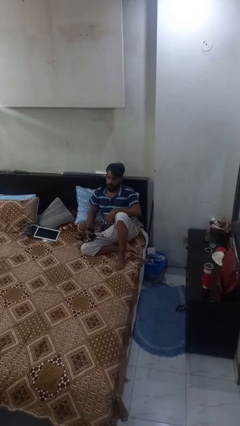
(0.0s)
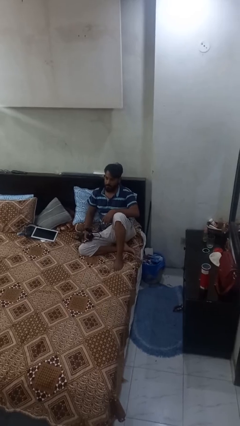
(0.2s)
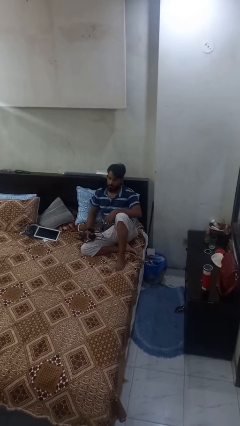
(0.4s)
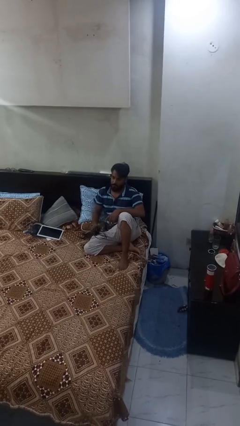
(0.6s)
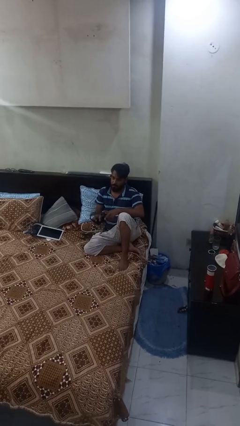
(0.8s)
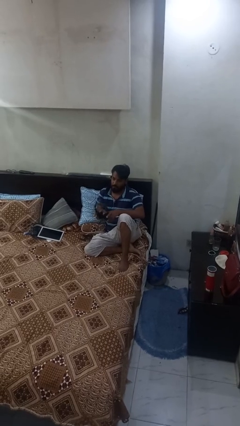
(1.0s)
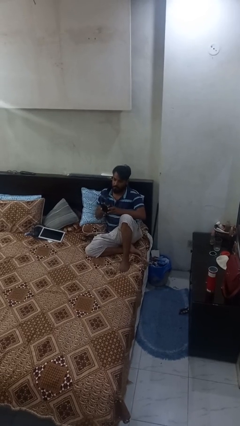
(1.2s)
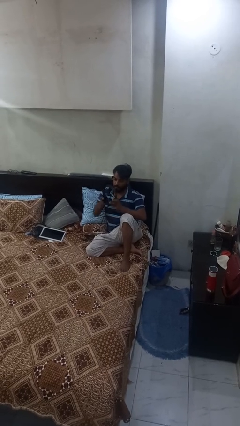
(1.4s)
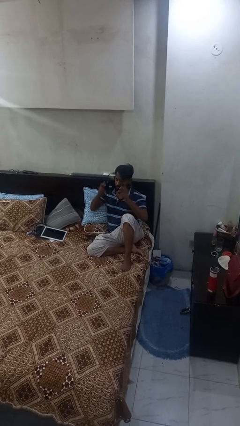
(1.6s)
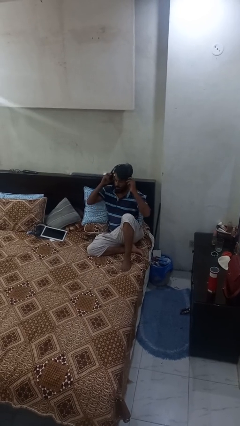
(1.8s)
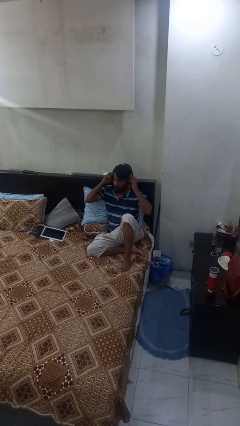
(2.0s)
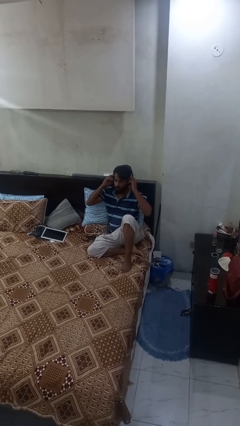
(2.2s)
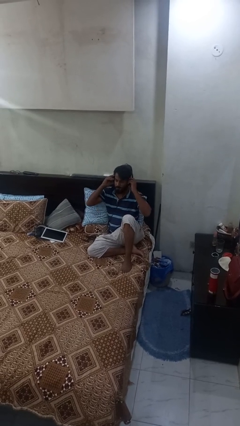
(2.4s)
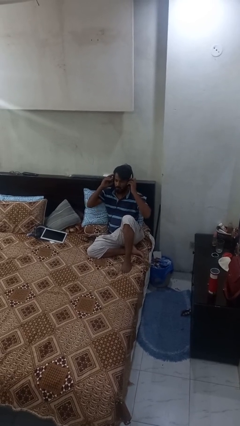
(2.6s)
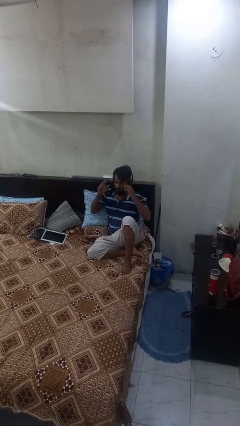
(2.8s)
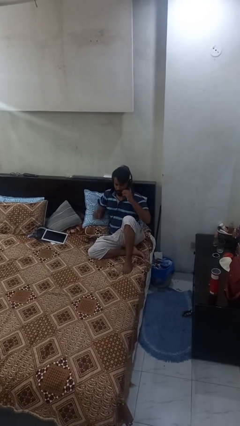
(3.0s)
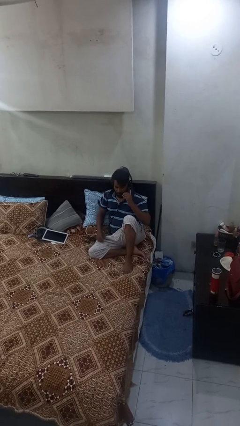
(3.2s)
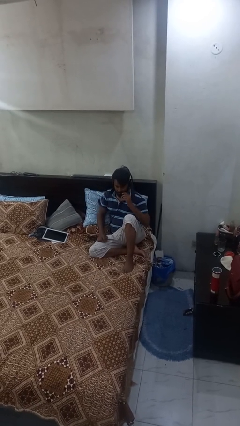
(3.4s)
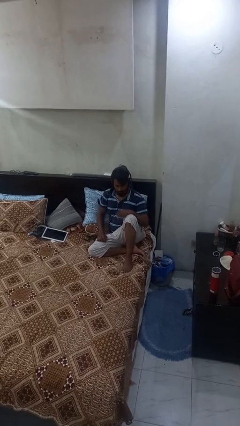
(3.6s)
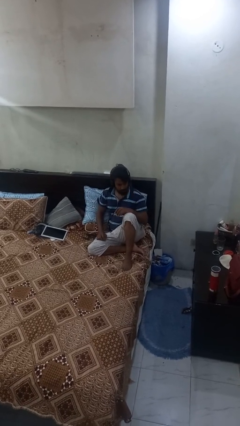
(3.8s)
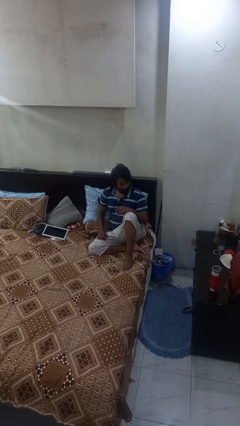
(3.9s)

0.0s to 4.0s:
person puts on headphones

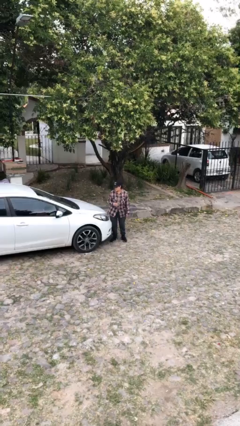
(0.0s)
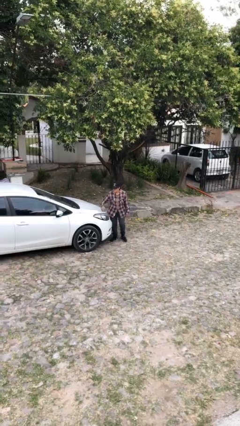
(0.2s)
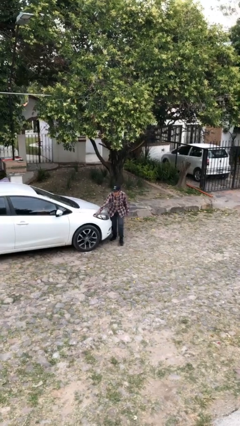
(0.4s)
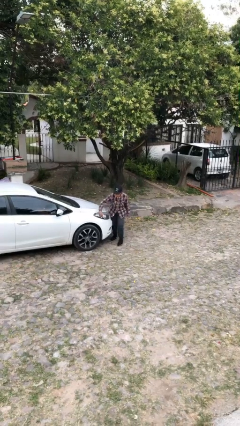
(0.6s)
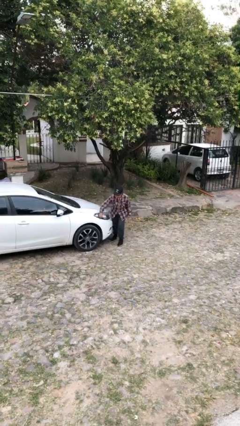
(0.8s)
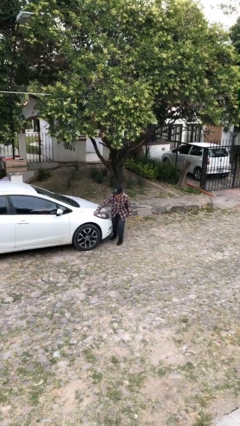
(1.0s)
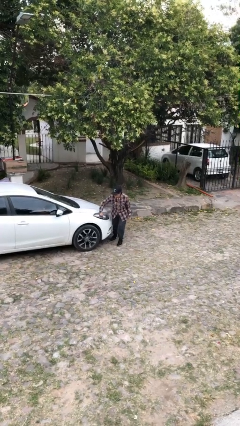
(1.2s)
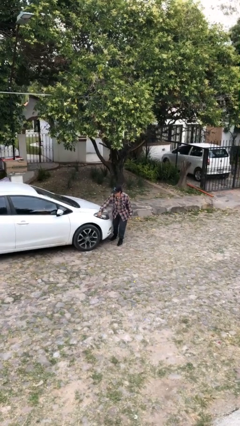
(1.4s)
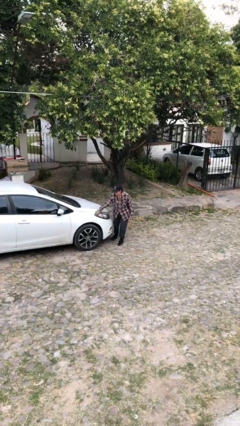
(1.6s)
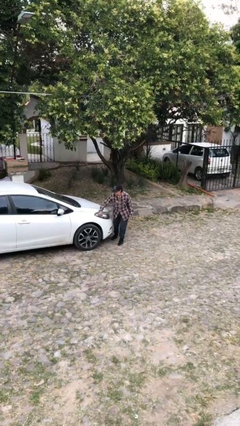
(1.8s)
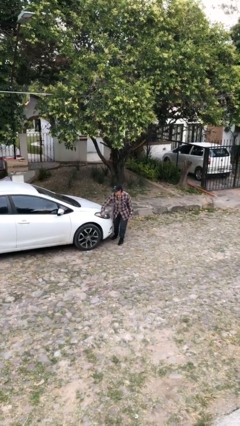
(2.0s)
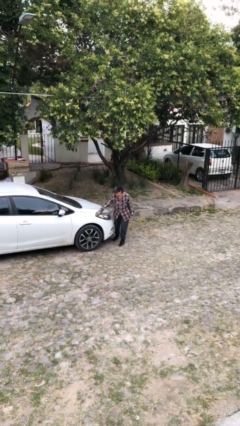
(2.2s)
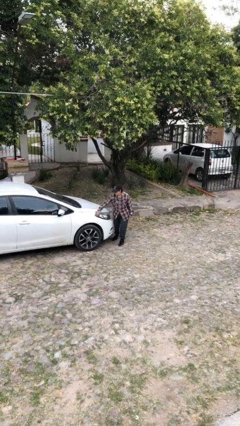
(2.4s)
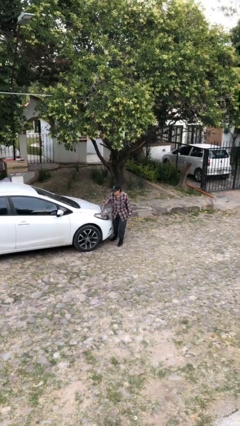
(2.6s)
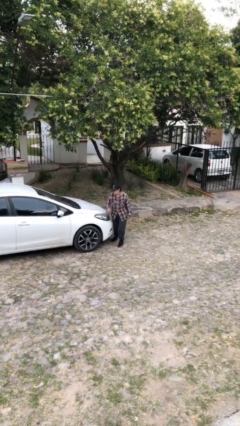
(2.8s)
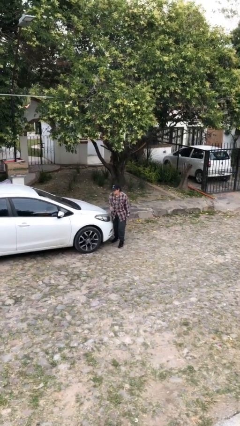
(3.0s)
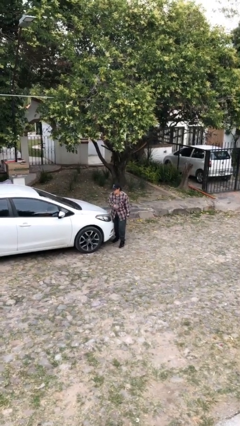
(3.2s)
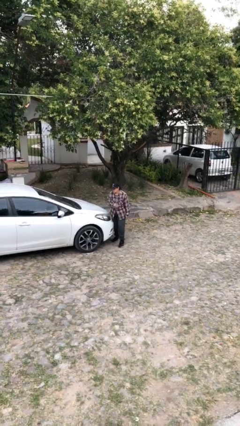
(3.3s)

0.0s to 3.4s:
person polishes car with rag

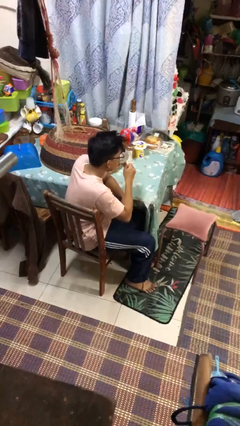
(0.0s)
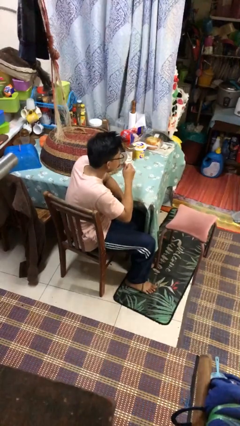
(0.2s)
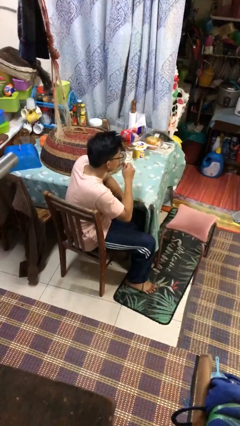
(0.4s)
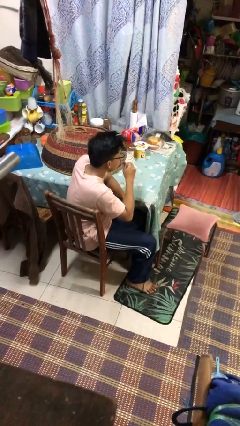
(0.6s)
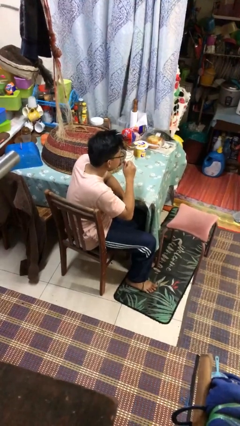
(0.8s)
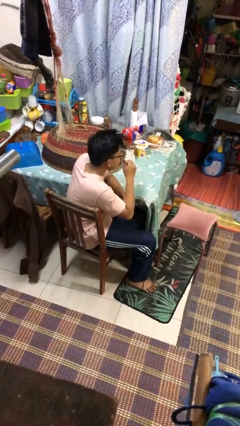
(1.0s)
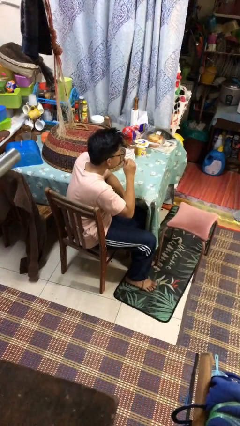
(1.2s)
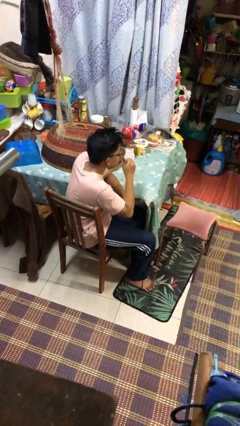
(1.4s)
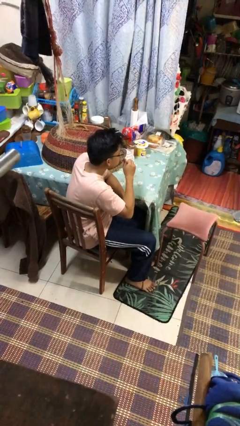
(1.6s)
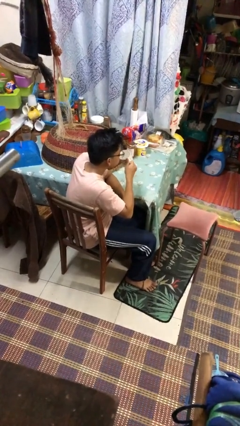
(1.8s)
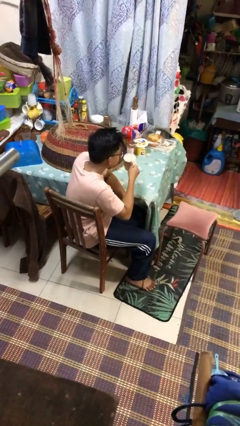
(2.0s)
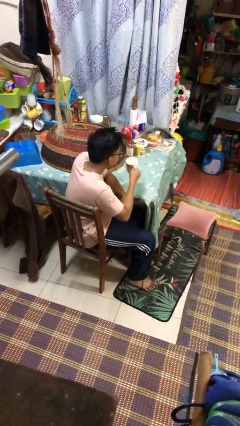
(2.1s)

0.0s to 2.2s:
person drinks from mug

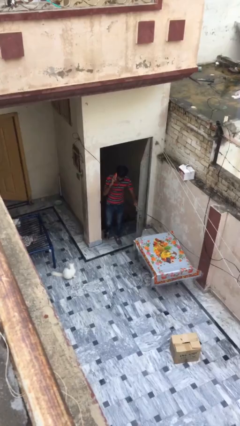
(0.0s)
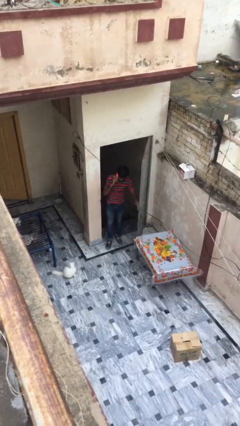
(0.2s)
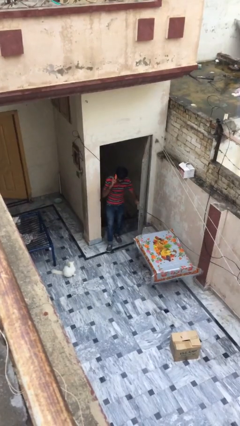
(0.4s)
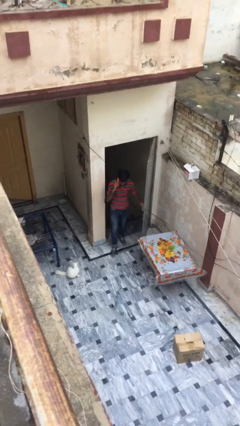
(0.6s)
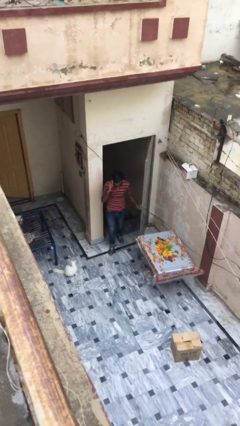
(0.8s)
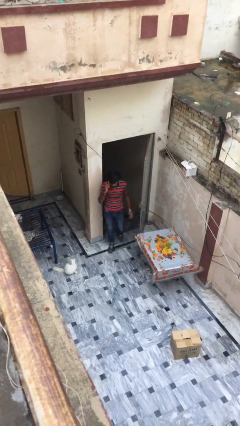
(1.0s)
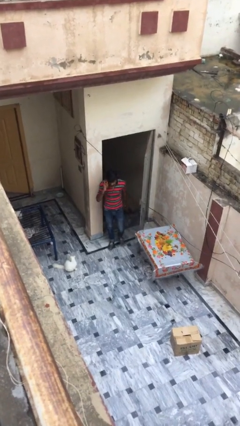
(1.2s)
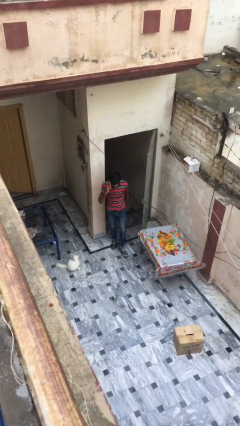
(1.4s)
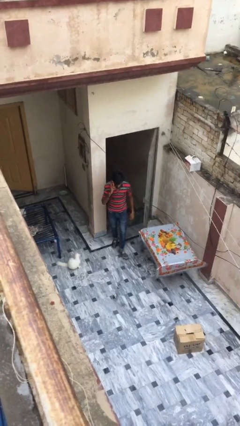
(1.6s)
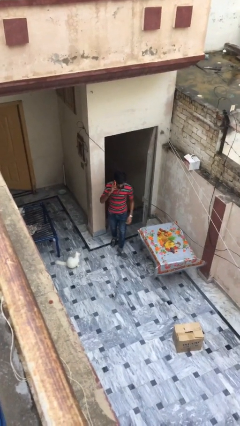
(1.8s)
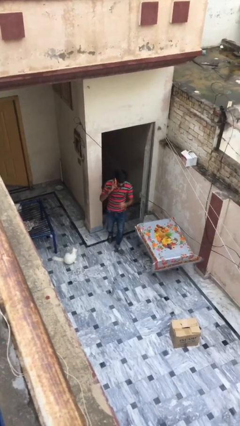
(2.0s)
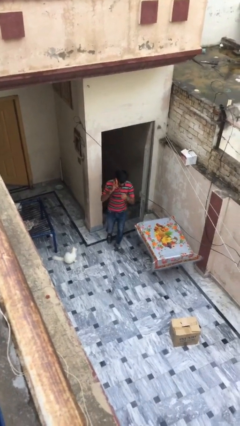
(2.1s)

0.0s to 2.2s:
person enters scene through structure

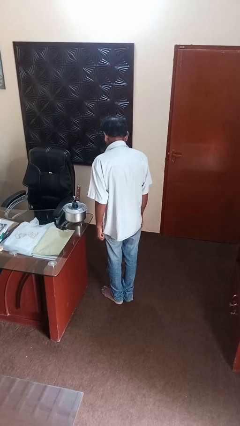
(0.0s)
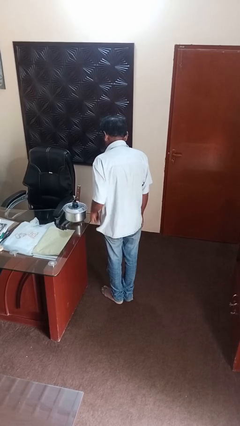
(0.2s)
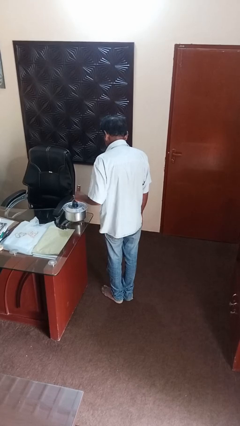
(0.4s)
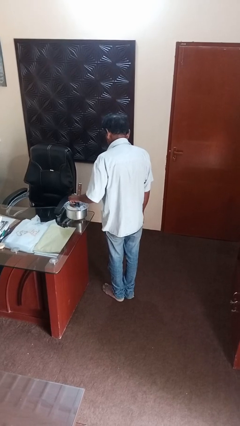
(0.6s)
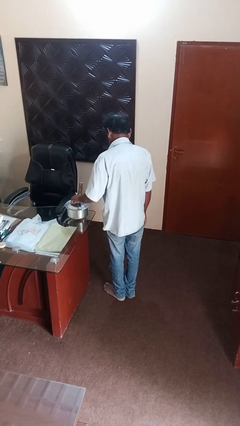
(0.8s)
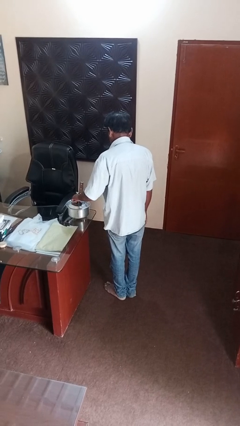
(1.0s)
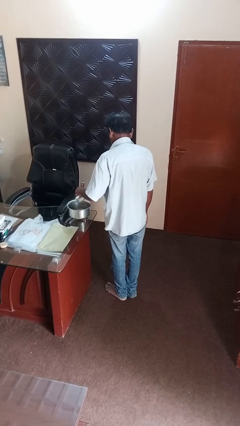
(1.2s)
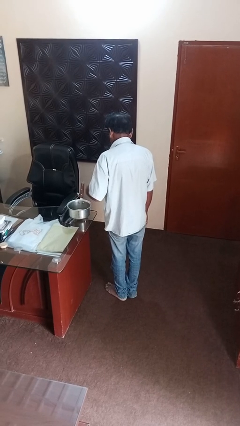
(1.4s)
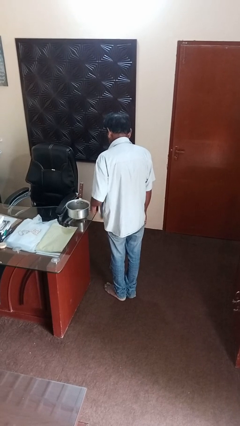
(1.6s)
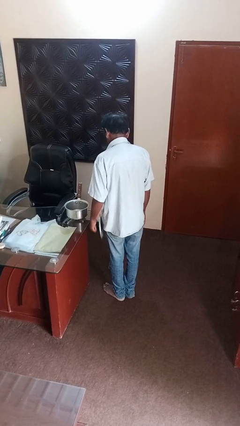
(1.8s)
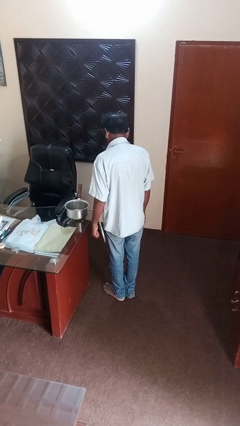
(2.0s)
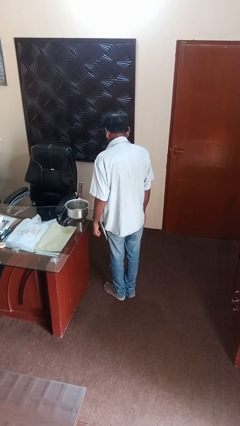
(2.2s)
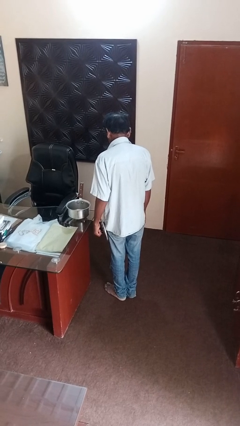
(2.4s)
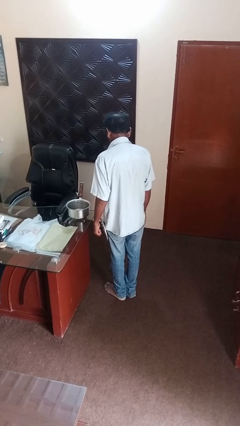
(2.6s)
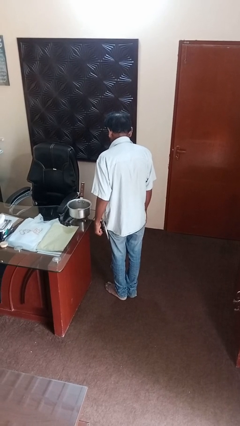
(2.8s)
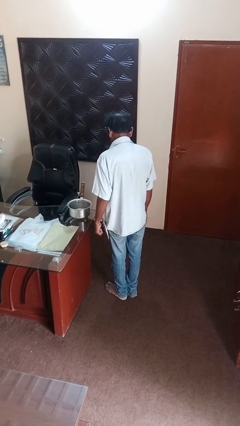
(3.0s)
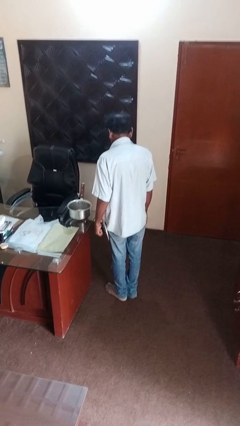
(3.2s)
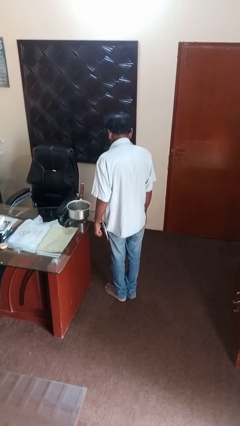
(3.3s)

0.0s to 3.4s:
person opens jar

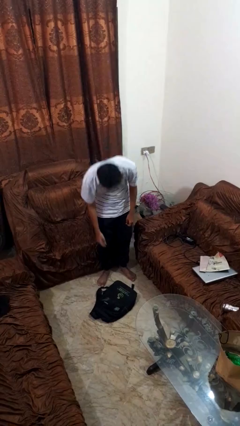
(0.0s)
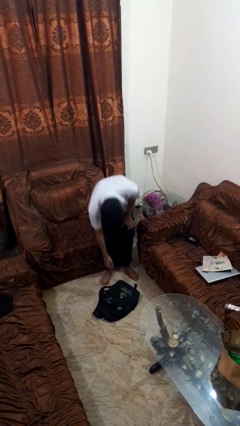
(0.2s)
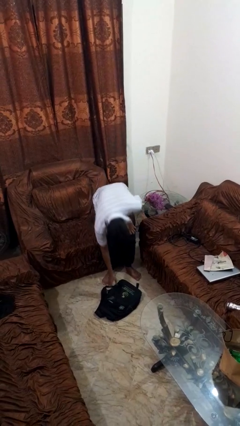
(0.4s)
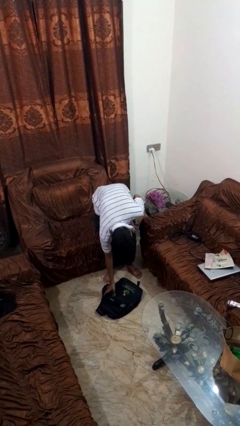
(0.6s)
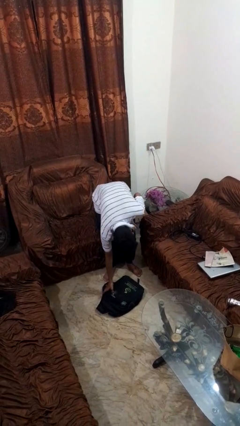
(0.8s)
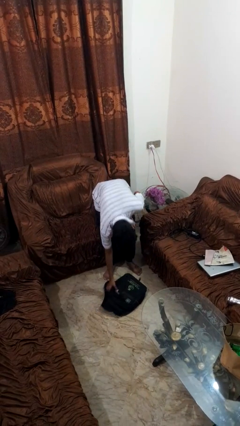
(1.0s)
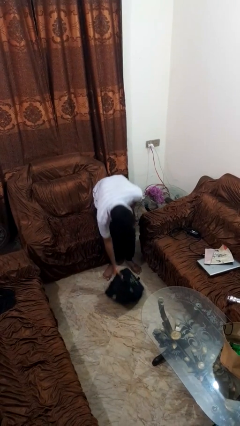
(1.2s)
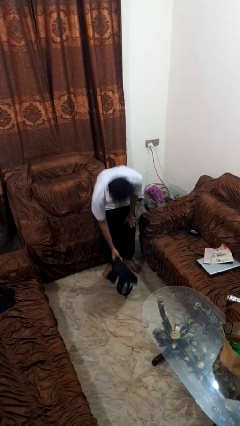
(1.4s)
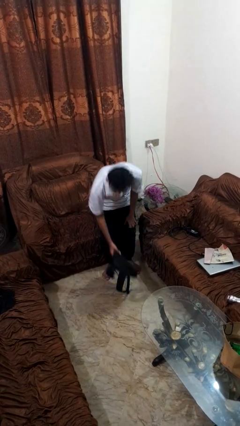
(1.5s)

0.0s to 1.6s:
person picks up object from floor

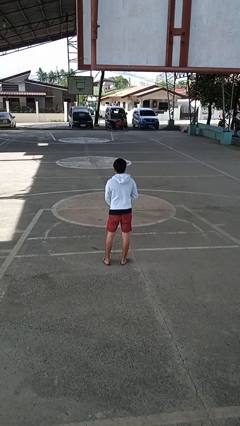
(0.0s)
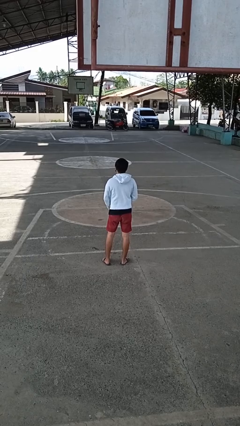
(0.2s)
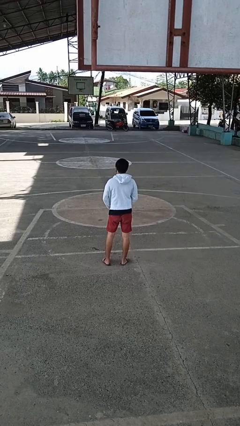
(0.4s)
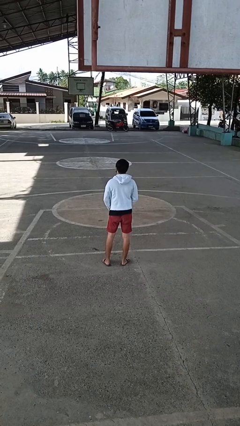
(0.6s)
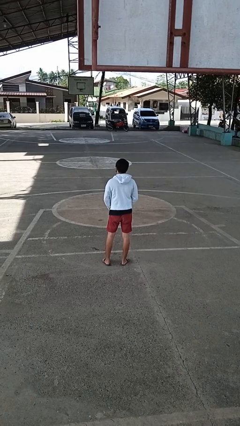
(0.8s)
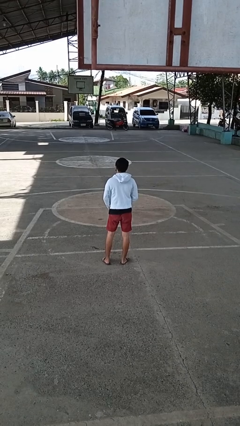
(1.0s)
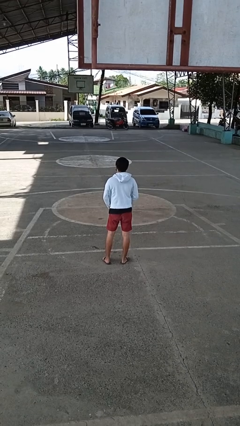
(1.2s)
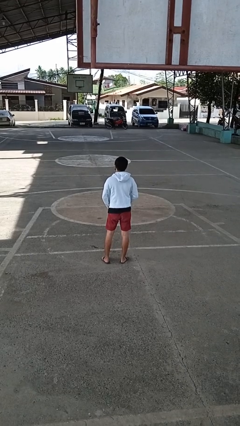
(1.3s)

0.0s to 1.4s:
person unzips jacket
